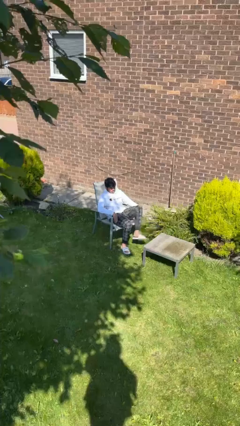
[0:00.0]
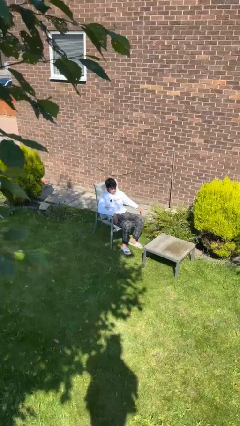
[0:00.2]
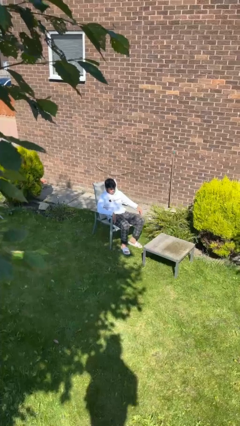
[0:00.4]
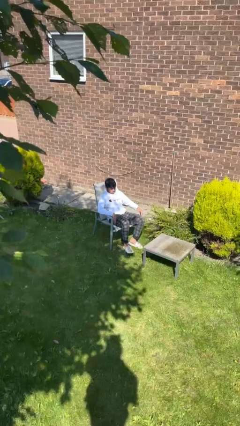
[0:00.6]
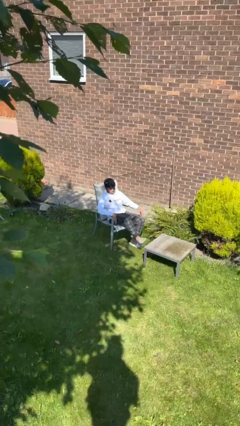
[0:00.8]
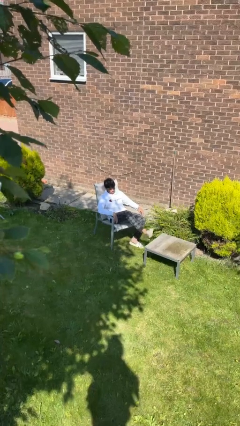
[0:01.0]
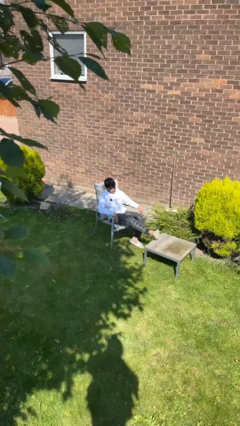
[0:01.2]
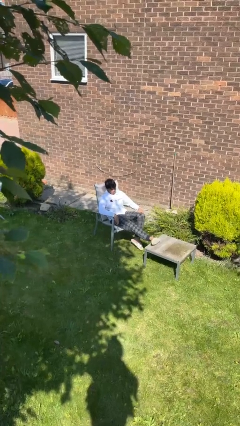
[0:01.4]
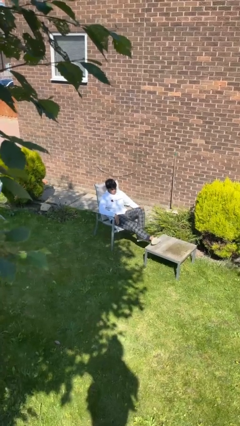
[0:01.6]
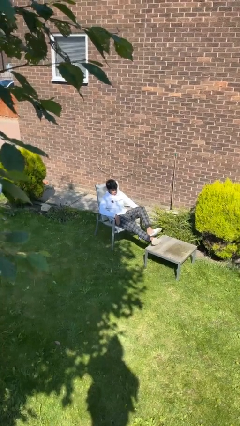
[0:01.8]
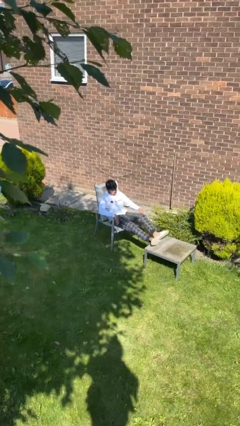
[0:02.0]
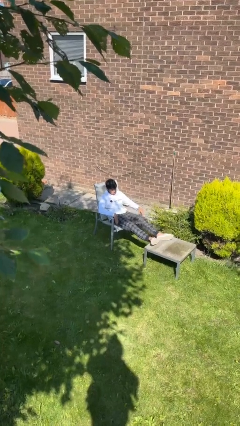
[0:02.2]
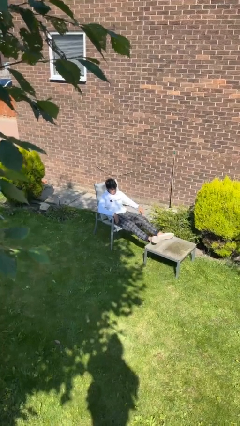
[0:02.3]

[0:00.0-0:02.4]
person puts feet up

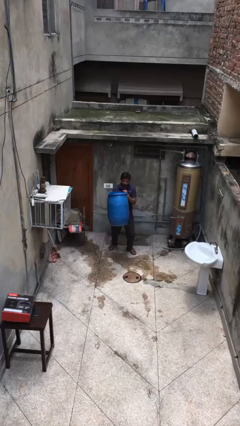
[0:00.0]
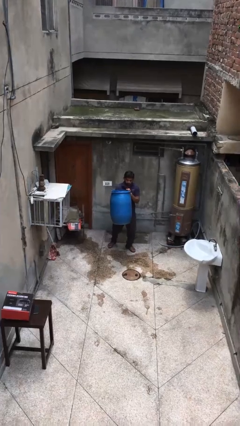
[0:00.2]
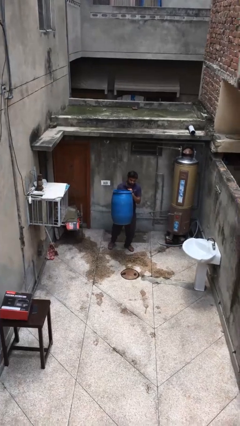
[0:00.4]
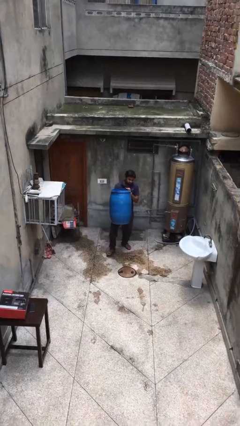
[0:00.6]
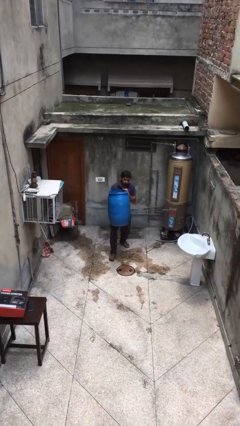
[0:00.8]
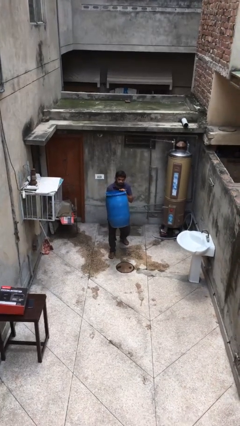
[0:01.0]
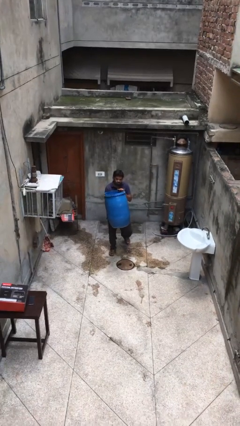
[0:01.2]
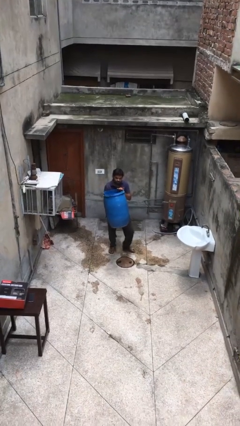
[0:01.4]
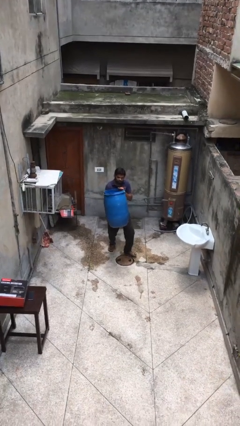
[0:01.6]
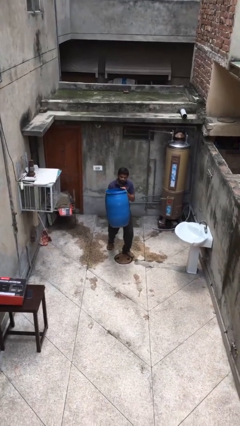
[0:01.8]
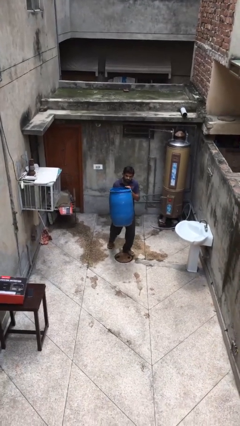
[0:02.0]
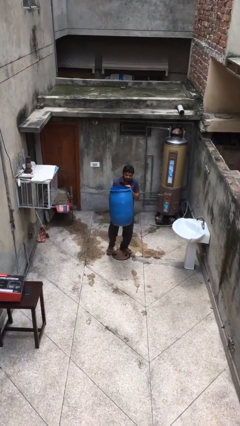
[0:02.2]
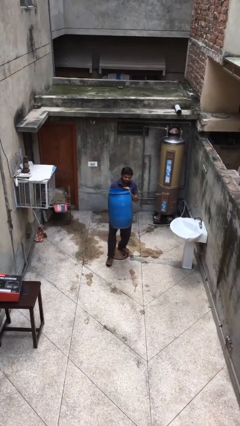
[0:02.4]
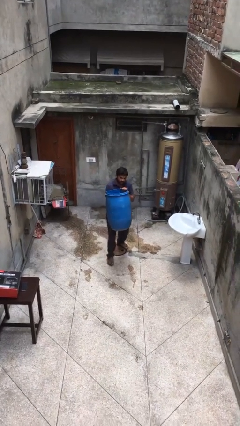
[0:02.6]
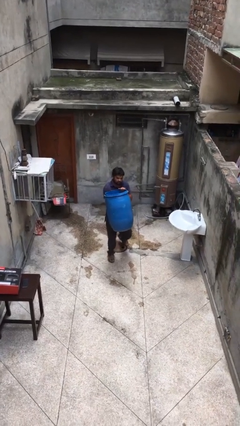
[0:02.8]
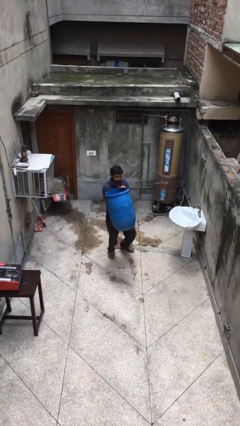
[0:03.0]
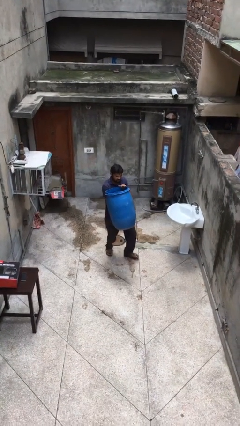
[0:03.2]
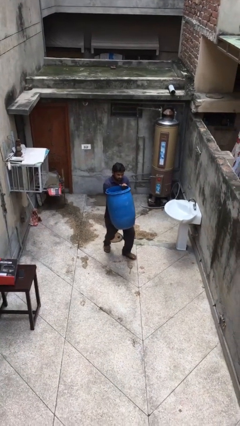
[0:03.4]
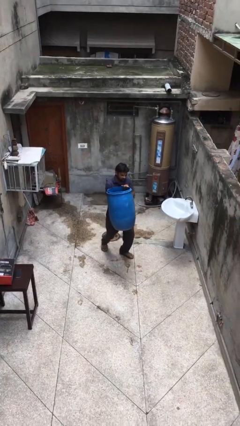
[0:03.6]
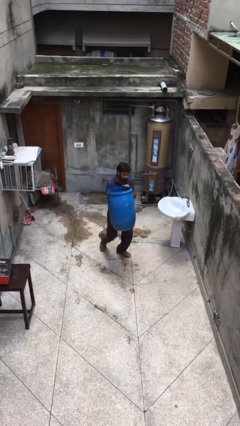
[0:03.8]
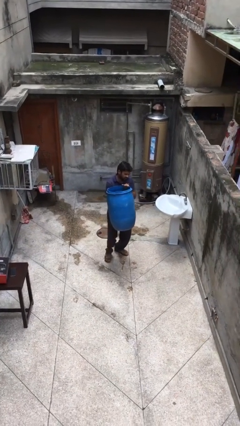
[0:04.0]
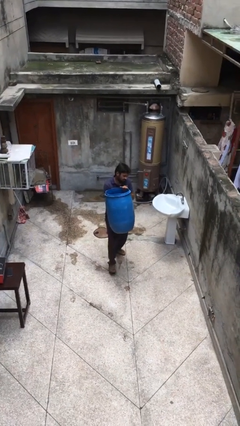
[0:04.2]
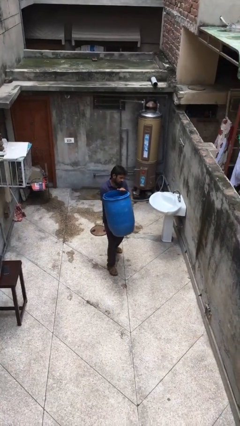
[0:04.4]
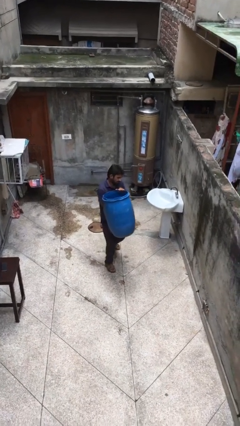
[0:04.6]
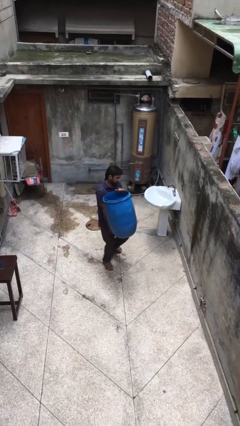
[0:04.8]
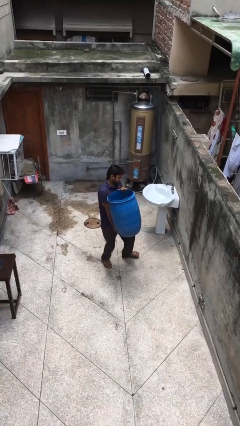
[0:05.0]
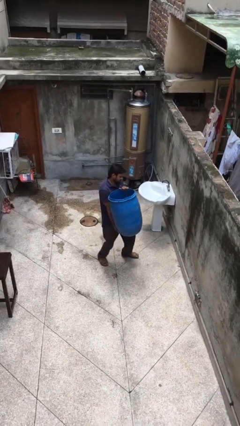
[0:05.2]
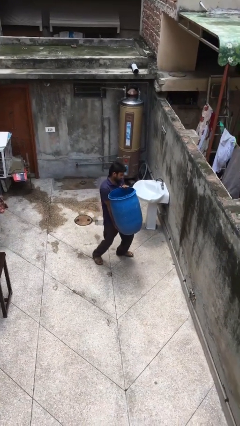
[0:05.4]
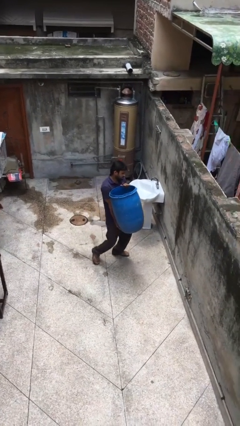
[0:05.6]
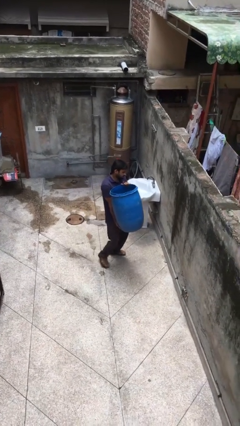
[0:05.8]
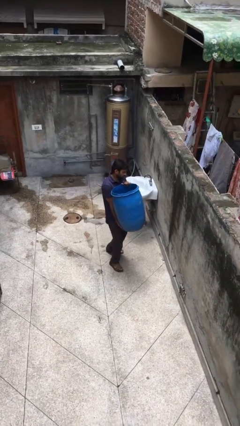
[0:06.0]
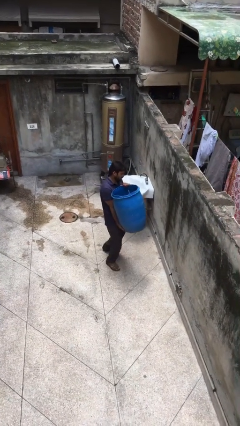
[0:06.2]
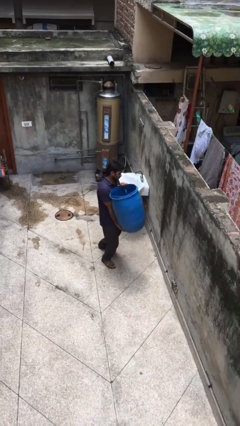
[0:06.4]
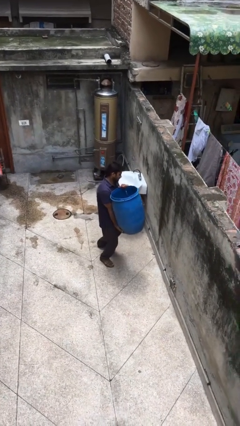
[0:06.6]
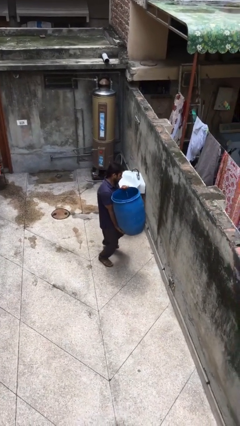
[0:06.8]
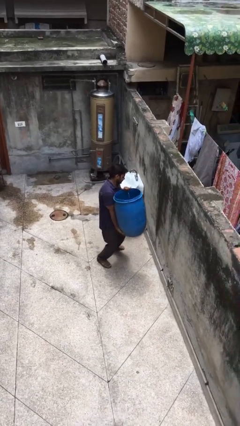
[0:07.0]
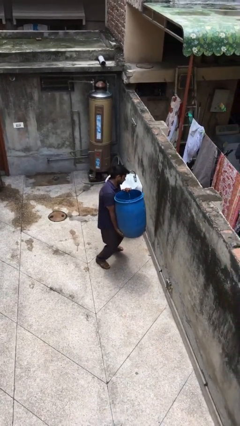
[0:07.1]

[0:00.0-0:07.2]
person carries heavy object

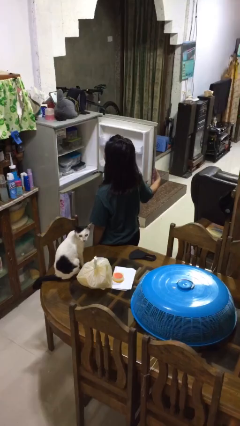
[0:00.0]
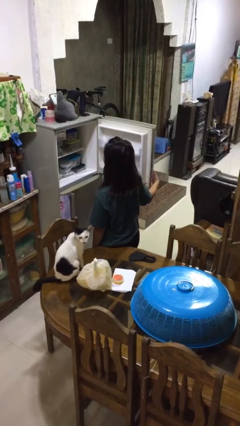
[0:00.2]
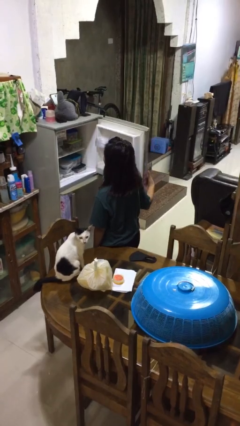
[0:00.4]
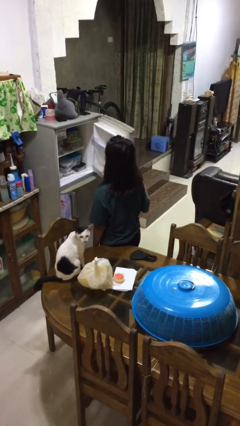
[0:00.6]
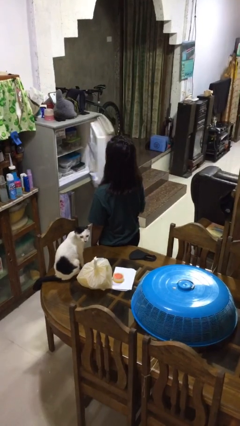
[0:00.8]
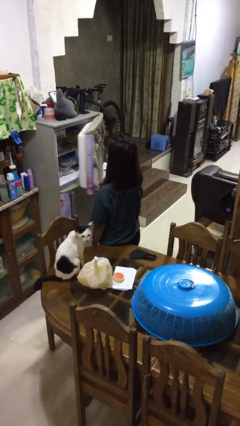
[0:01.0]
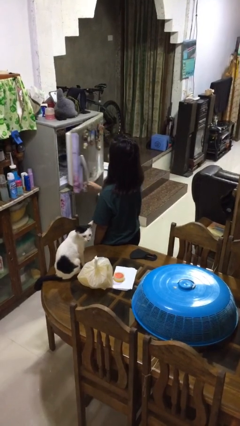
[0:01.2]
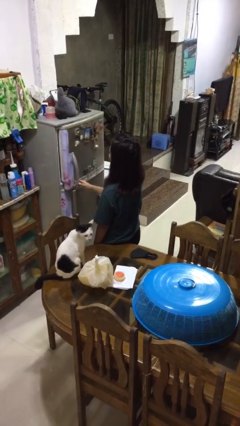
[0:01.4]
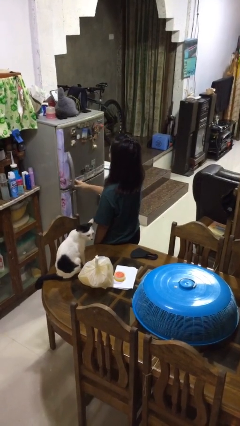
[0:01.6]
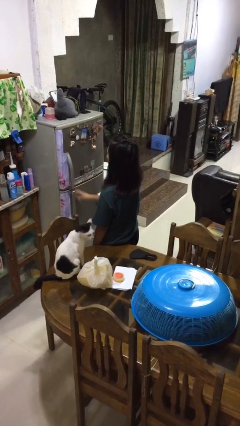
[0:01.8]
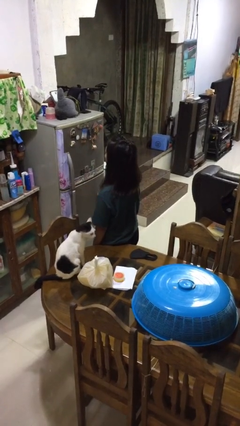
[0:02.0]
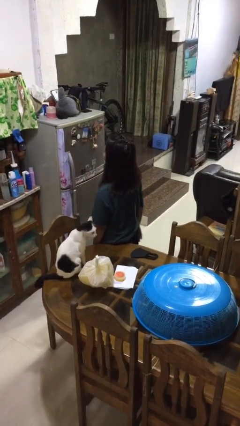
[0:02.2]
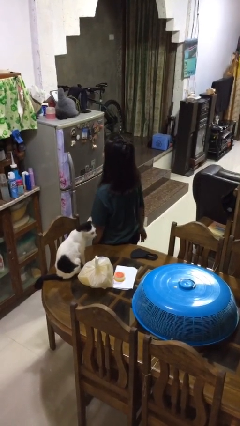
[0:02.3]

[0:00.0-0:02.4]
person closes refrigerator

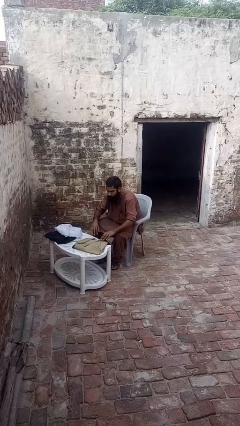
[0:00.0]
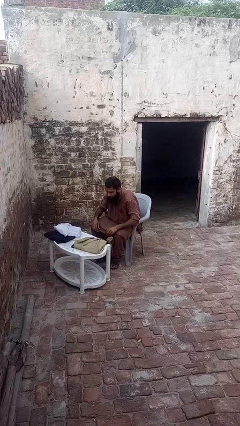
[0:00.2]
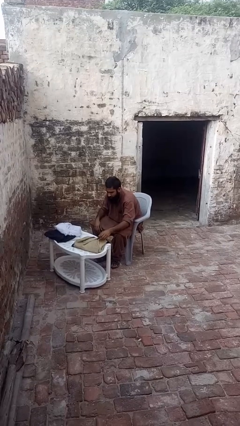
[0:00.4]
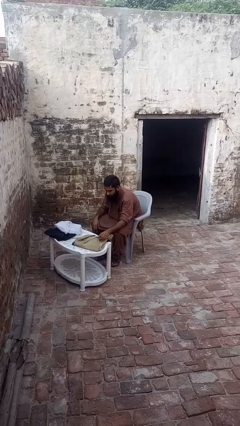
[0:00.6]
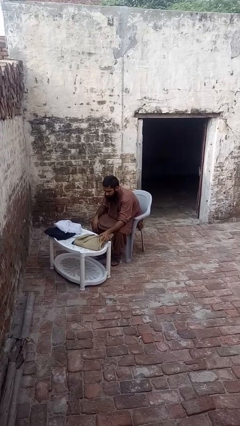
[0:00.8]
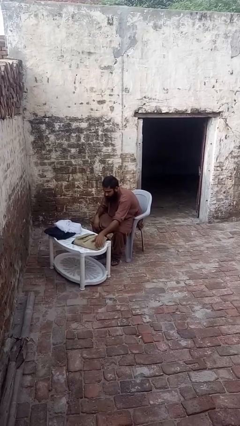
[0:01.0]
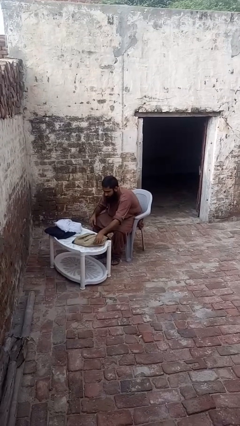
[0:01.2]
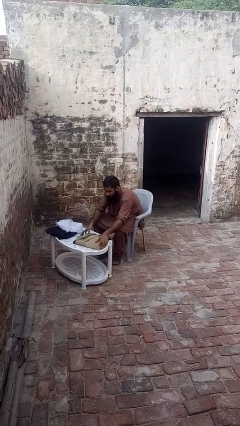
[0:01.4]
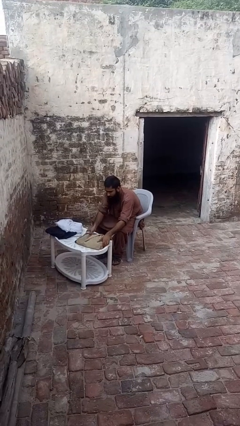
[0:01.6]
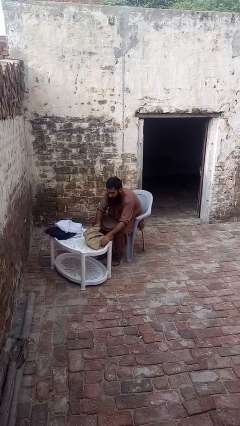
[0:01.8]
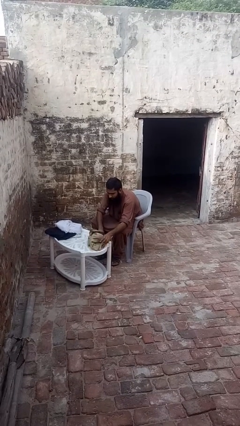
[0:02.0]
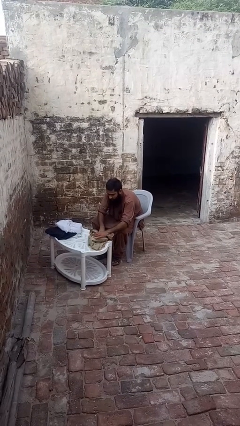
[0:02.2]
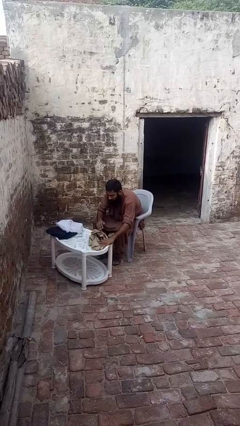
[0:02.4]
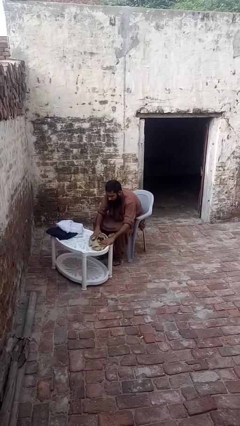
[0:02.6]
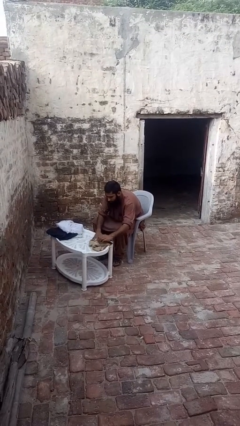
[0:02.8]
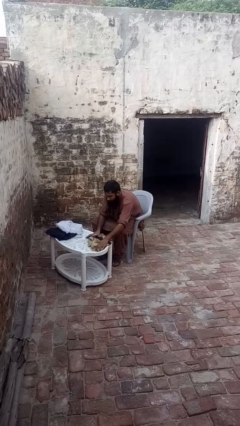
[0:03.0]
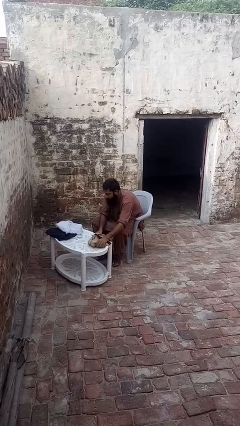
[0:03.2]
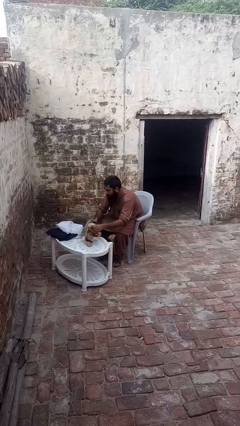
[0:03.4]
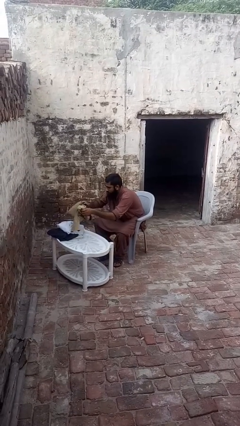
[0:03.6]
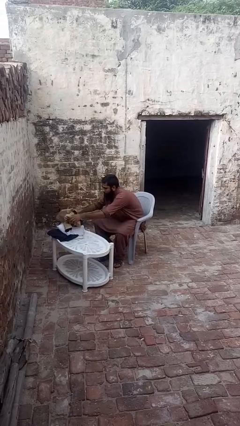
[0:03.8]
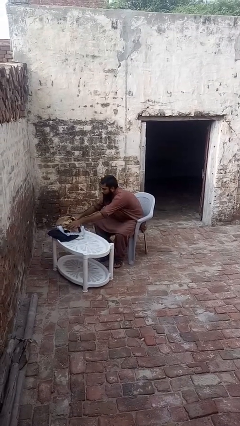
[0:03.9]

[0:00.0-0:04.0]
person folds shirt

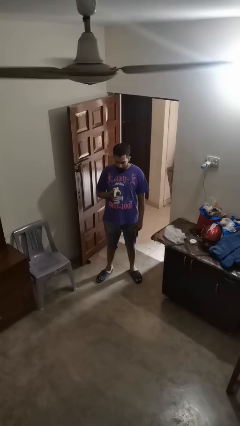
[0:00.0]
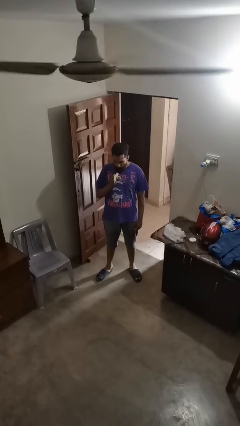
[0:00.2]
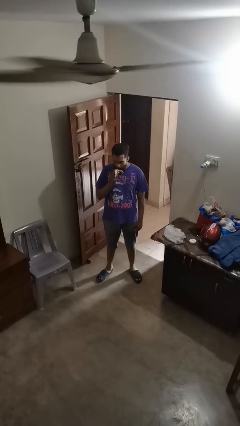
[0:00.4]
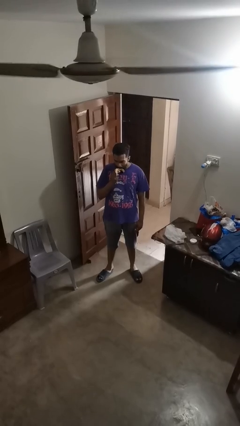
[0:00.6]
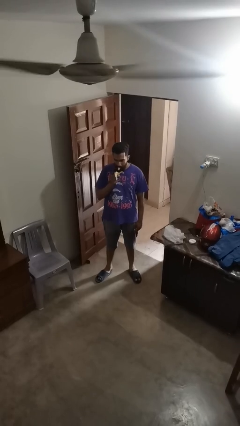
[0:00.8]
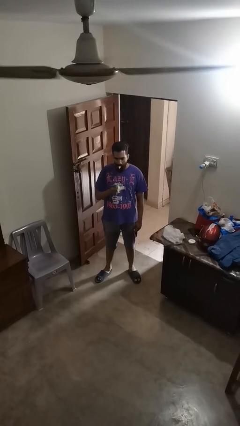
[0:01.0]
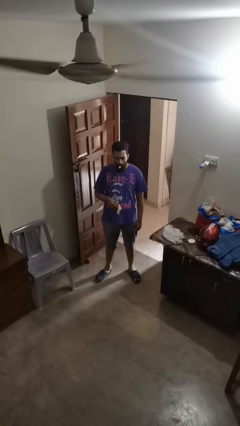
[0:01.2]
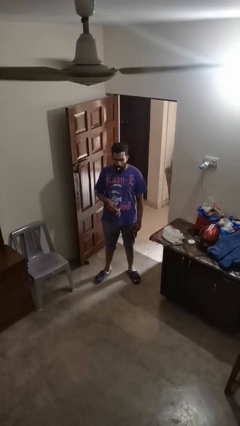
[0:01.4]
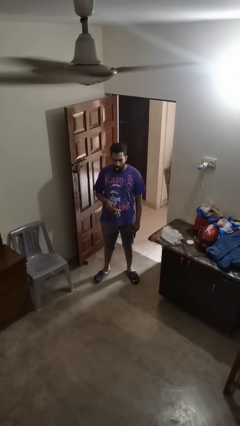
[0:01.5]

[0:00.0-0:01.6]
person eats banana
